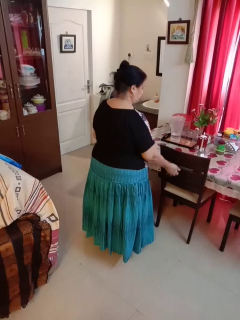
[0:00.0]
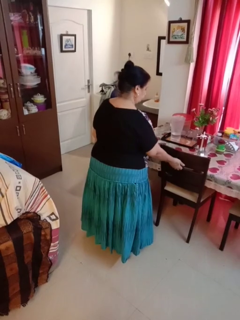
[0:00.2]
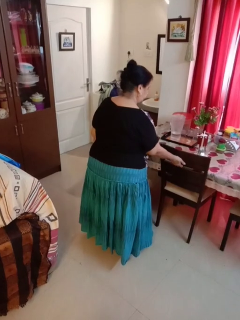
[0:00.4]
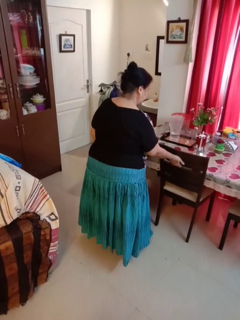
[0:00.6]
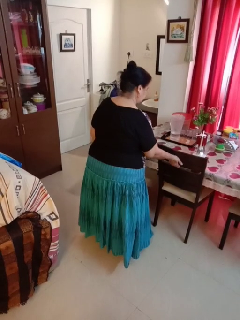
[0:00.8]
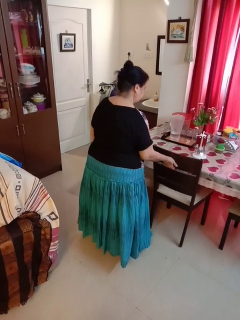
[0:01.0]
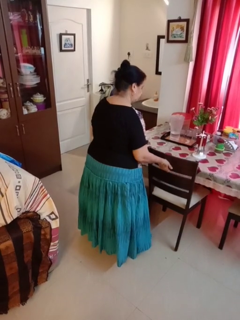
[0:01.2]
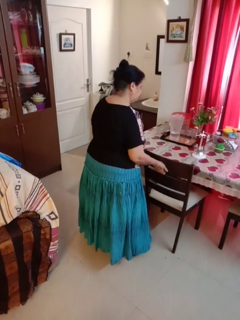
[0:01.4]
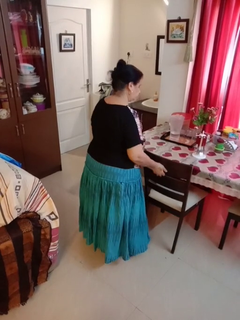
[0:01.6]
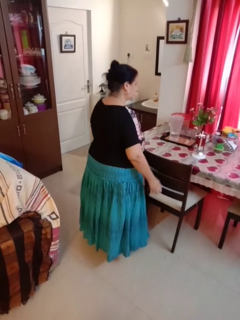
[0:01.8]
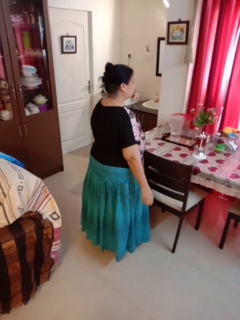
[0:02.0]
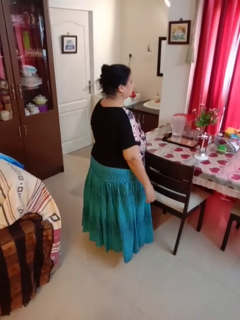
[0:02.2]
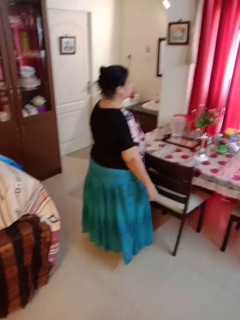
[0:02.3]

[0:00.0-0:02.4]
person pulls out chair

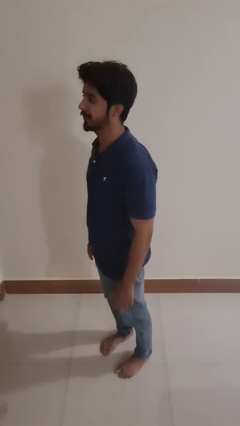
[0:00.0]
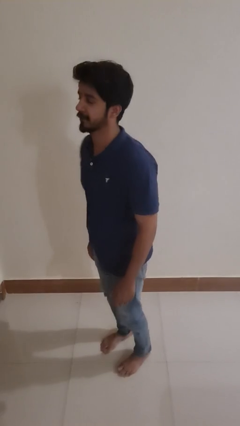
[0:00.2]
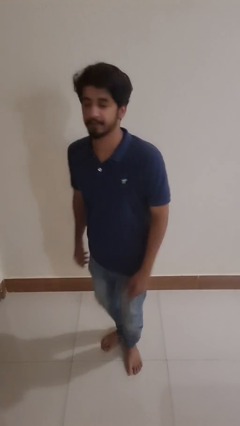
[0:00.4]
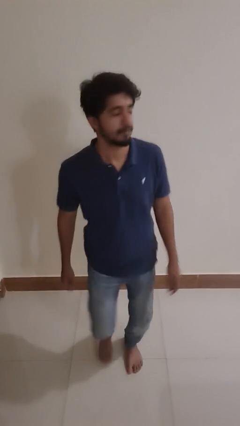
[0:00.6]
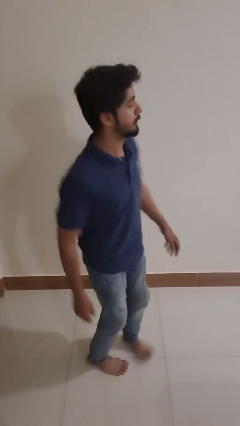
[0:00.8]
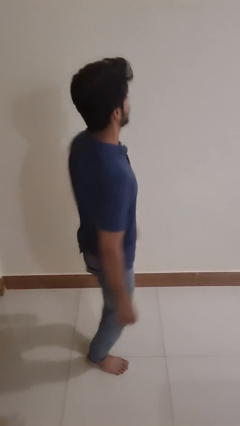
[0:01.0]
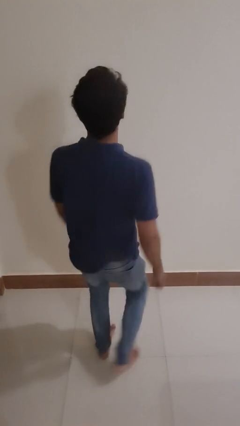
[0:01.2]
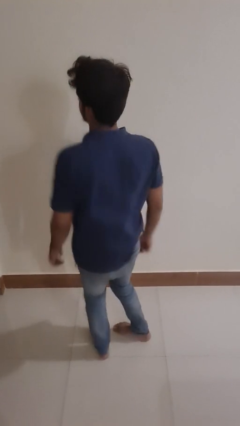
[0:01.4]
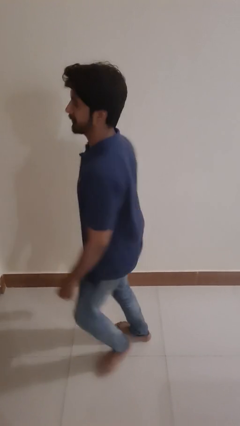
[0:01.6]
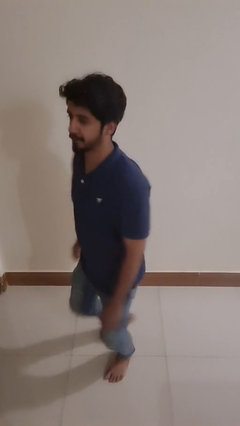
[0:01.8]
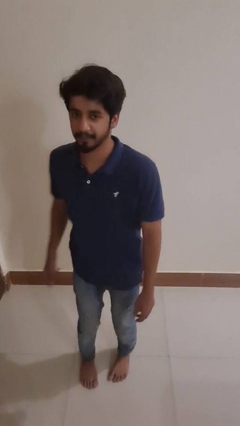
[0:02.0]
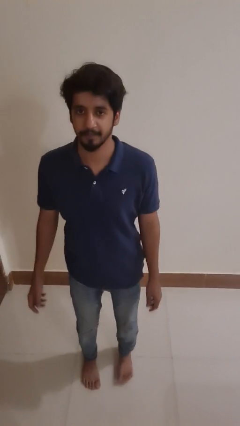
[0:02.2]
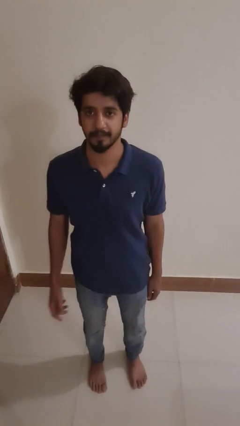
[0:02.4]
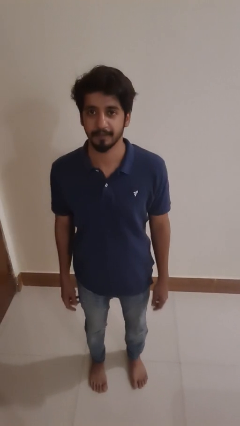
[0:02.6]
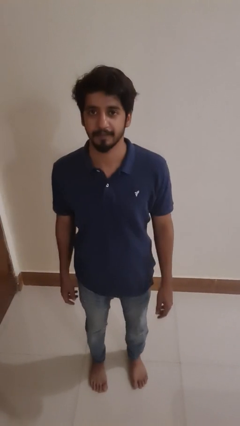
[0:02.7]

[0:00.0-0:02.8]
person twirls

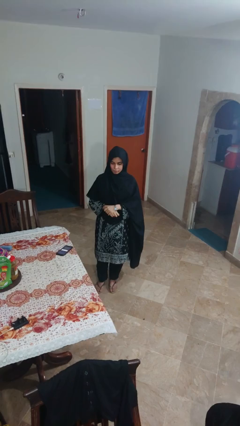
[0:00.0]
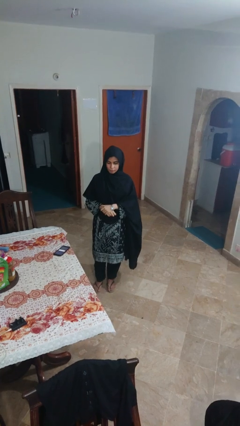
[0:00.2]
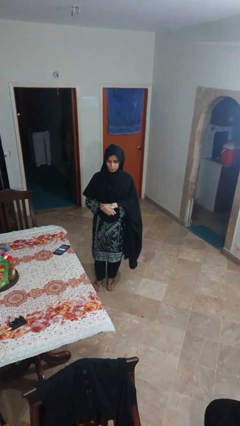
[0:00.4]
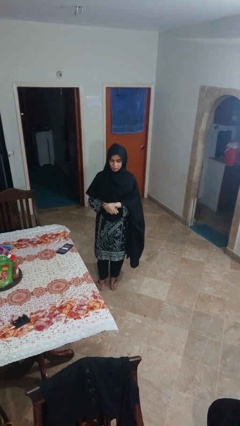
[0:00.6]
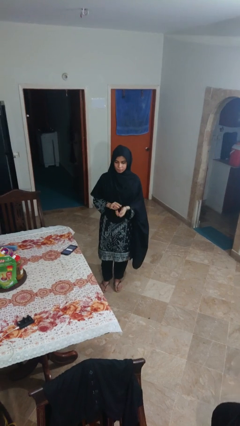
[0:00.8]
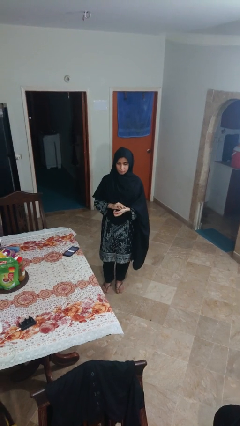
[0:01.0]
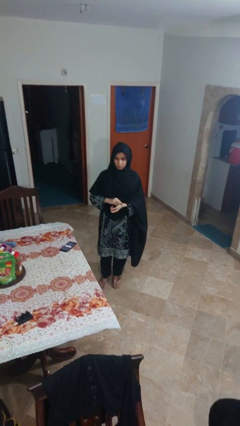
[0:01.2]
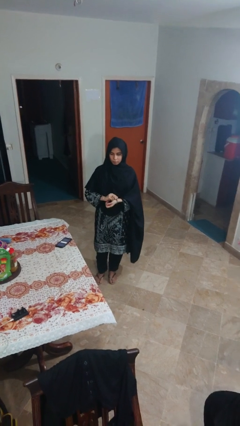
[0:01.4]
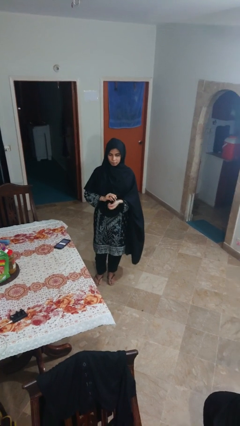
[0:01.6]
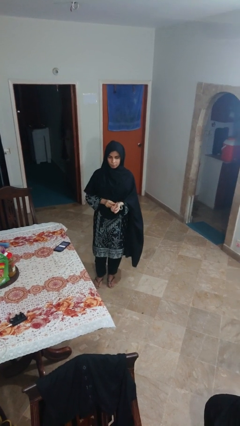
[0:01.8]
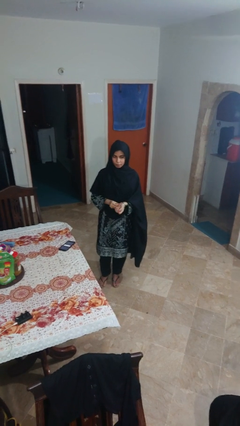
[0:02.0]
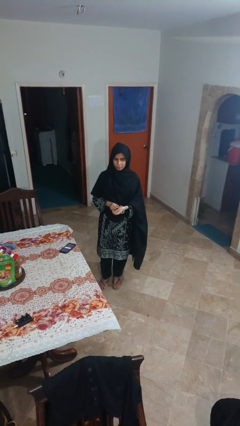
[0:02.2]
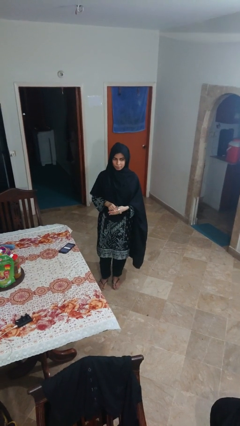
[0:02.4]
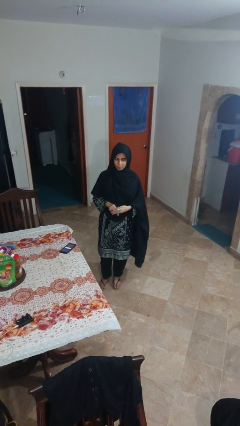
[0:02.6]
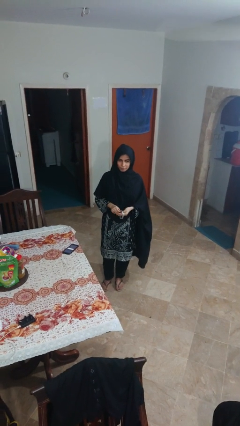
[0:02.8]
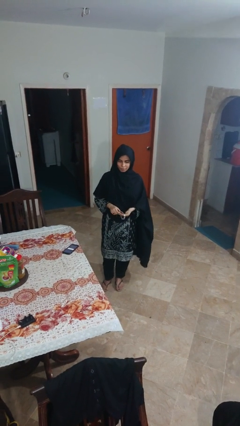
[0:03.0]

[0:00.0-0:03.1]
person takes off wristwatch

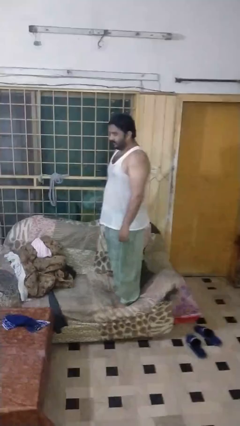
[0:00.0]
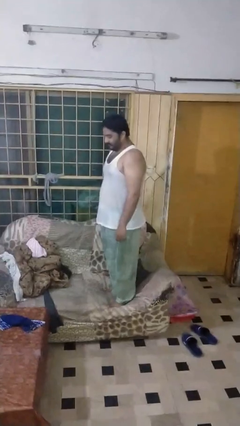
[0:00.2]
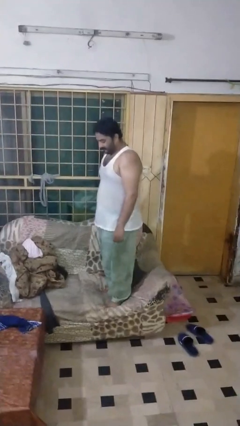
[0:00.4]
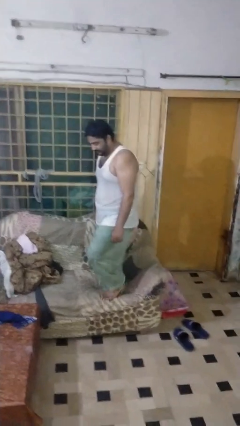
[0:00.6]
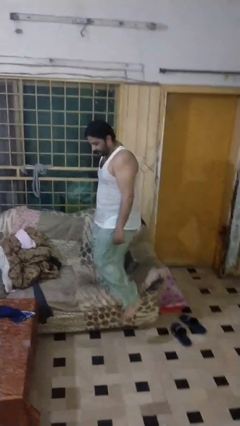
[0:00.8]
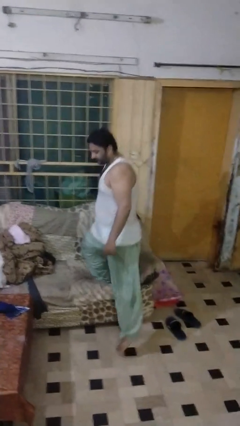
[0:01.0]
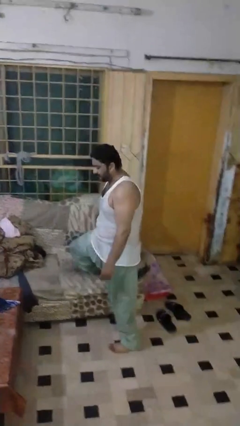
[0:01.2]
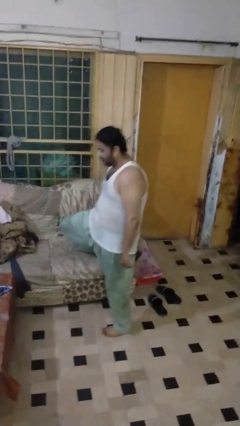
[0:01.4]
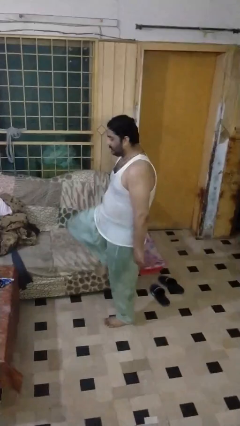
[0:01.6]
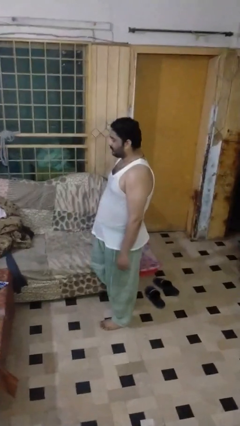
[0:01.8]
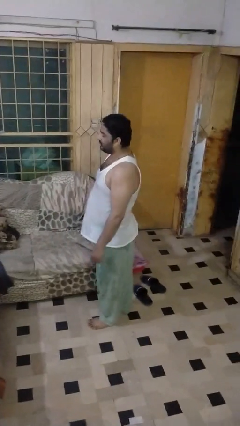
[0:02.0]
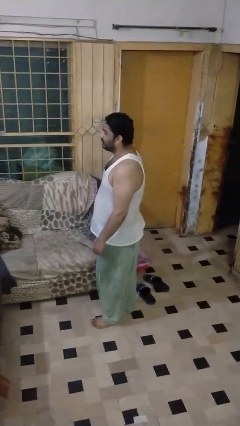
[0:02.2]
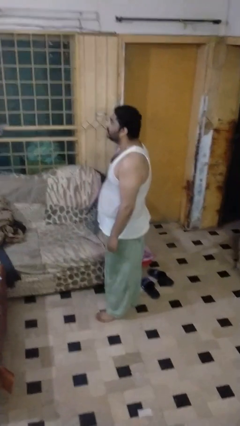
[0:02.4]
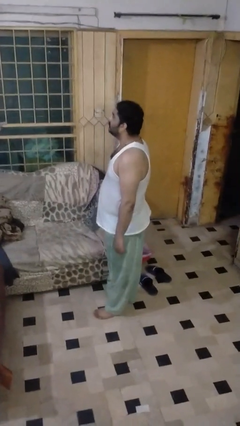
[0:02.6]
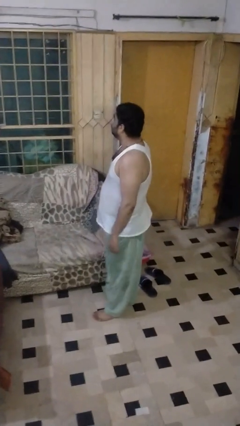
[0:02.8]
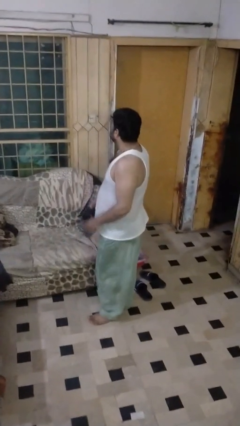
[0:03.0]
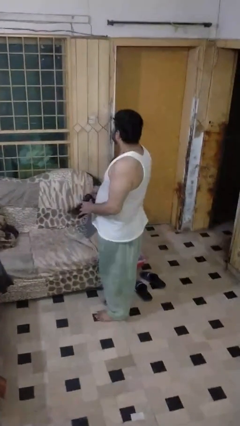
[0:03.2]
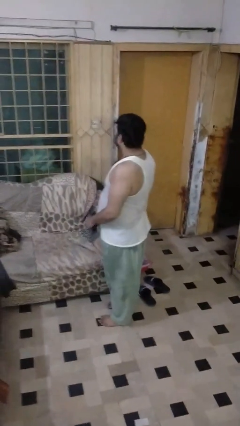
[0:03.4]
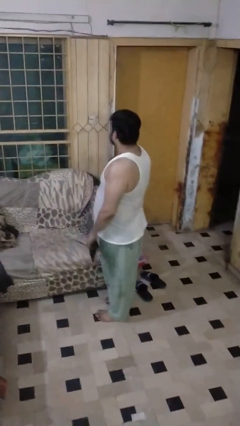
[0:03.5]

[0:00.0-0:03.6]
person climbs off couch

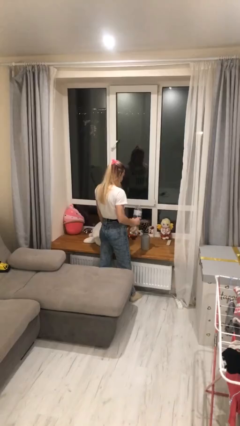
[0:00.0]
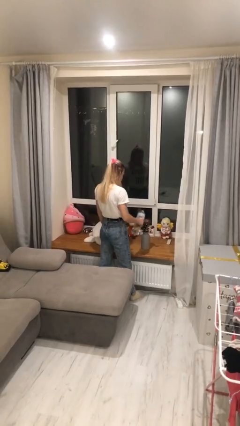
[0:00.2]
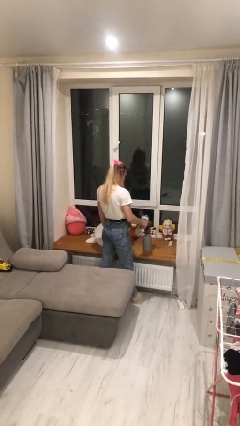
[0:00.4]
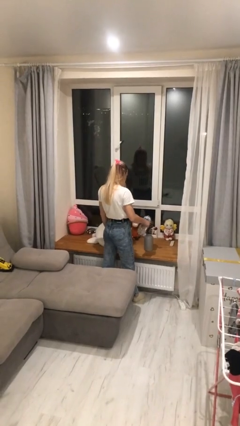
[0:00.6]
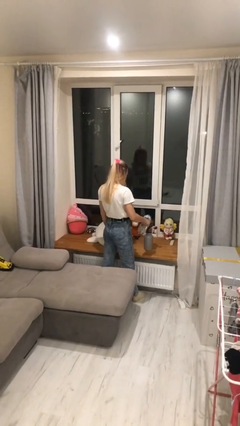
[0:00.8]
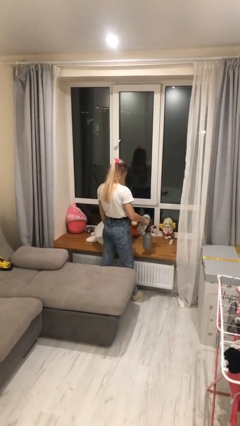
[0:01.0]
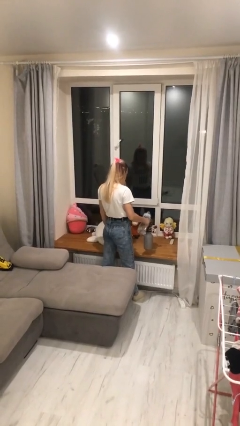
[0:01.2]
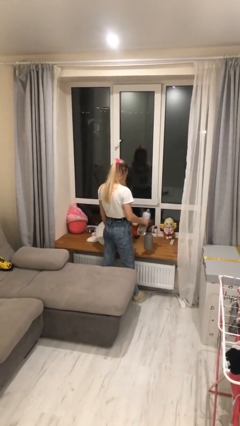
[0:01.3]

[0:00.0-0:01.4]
person waters houseplant

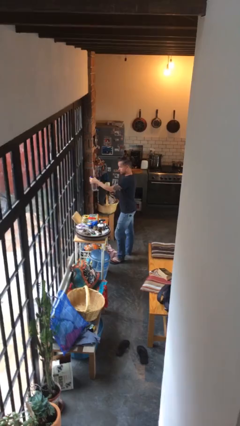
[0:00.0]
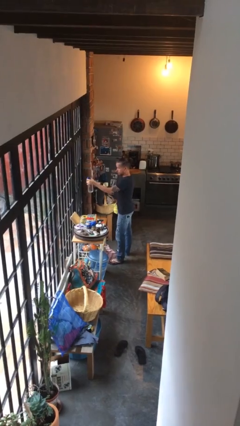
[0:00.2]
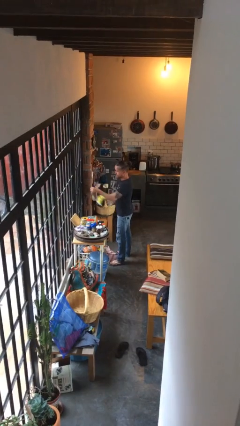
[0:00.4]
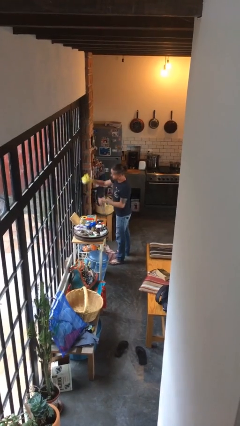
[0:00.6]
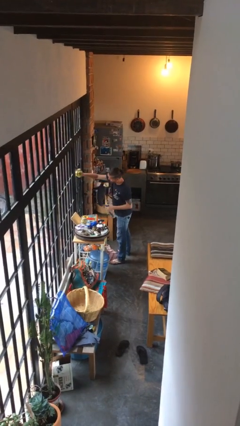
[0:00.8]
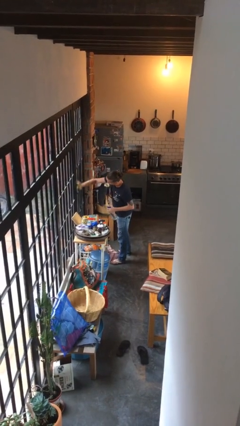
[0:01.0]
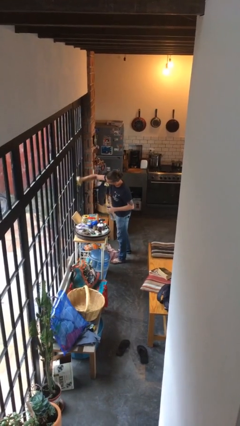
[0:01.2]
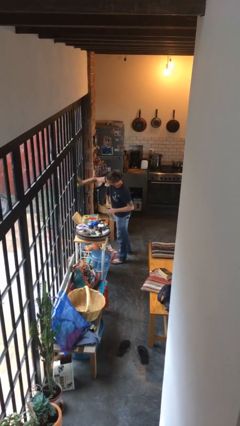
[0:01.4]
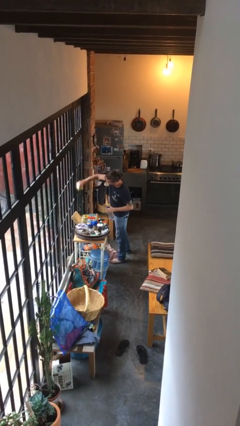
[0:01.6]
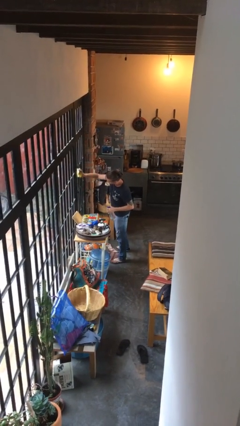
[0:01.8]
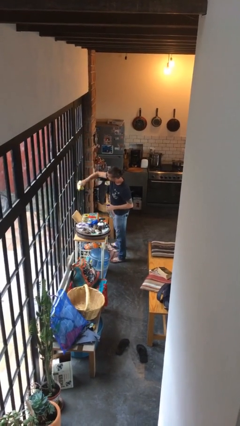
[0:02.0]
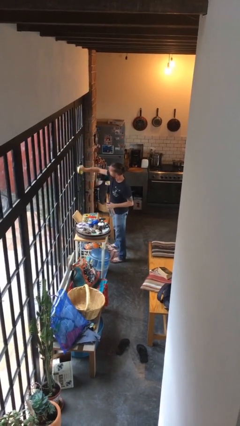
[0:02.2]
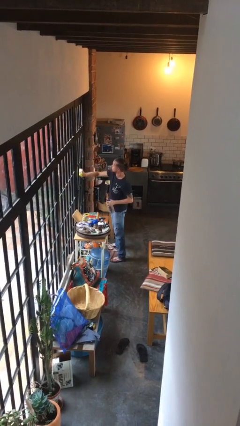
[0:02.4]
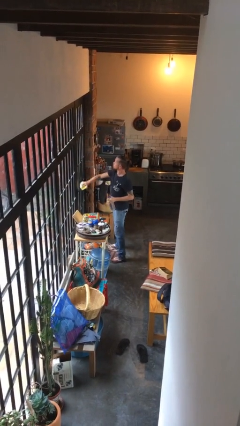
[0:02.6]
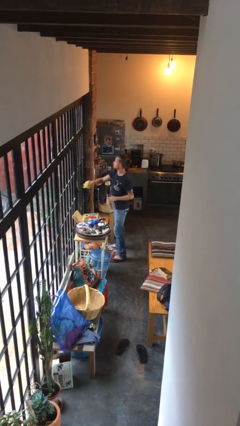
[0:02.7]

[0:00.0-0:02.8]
person washes window

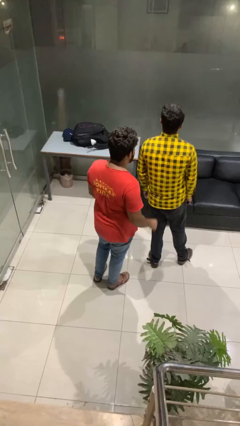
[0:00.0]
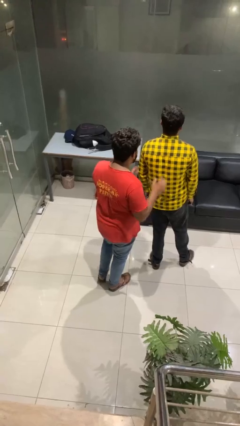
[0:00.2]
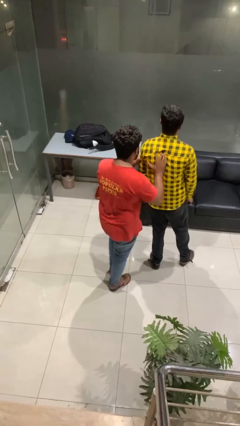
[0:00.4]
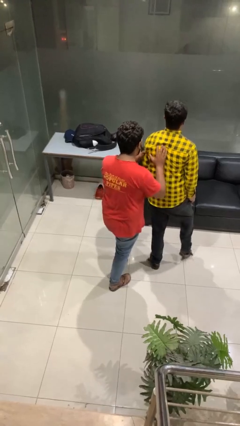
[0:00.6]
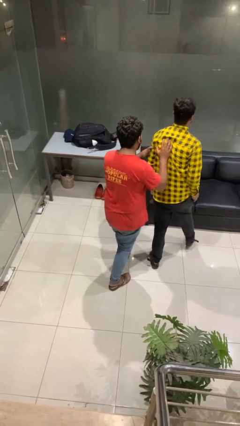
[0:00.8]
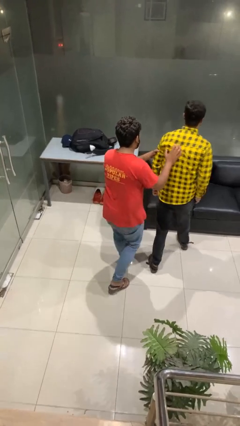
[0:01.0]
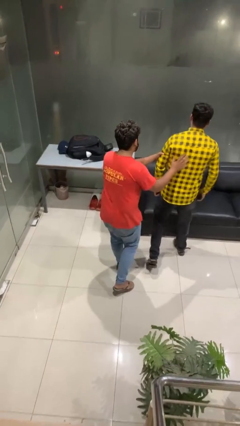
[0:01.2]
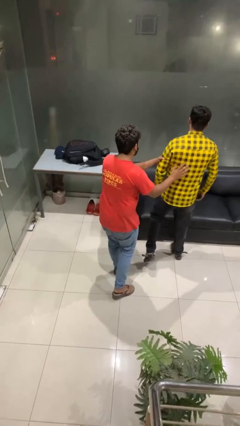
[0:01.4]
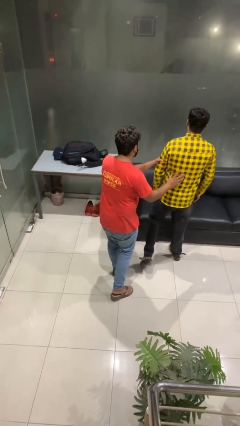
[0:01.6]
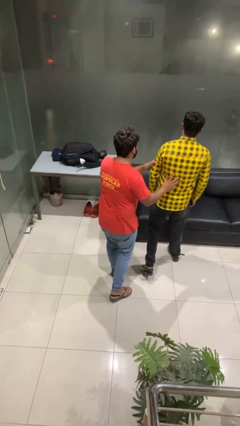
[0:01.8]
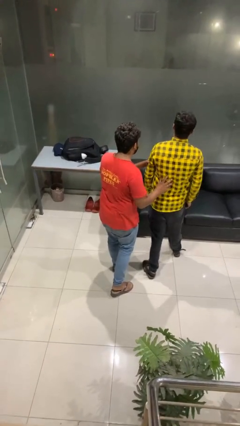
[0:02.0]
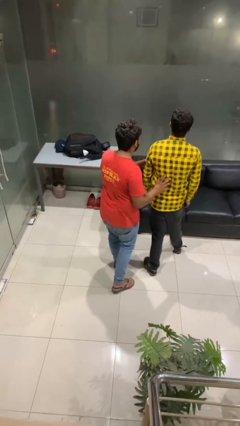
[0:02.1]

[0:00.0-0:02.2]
person shoves person
